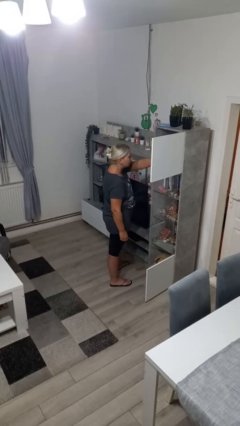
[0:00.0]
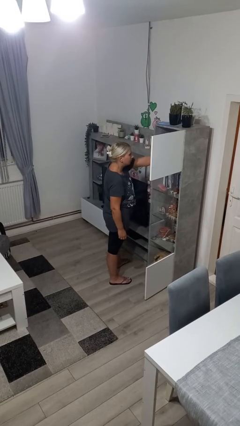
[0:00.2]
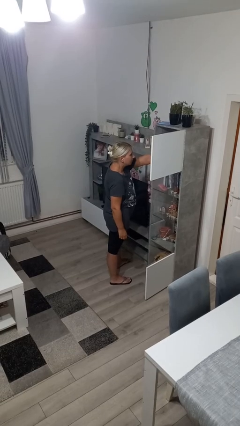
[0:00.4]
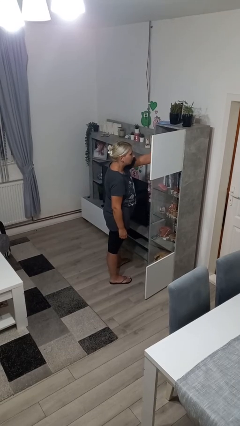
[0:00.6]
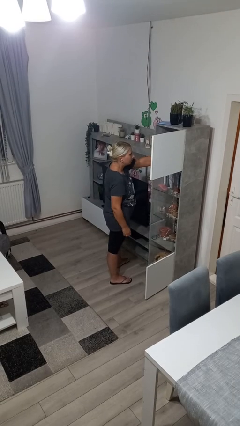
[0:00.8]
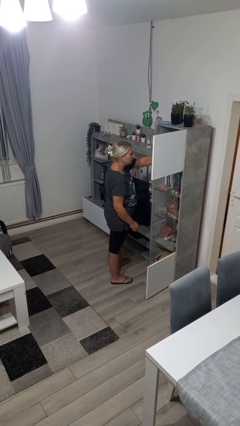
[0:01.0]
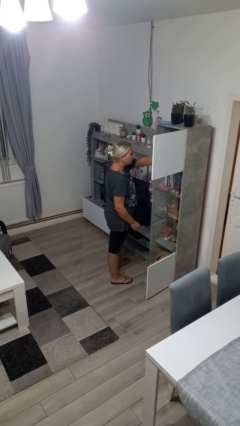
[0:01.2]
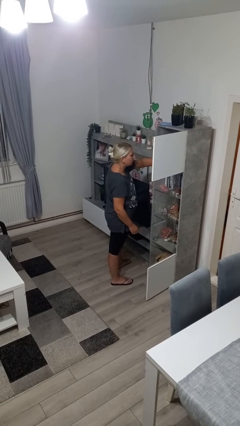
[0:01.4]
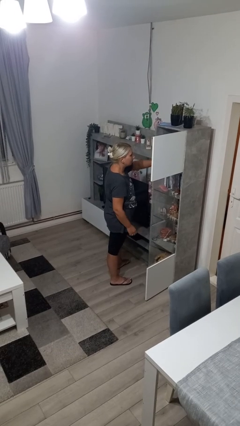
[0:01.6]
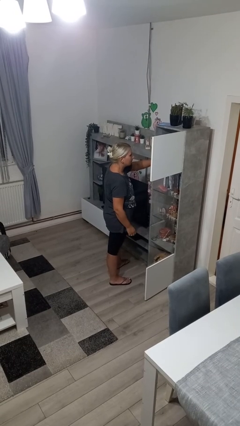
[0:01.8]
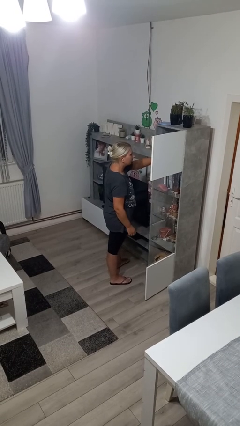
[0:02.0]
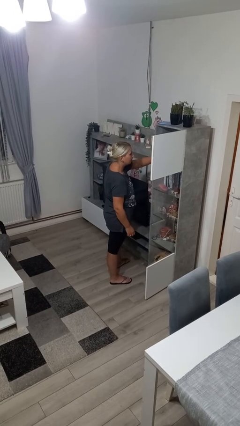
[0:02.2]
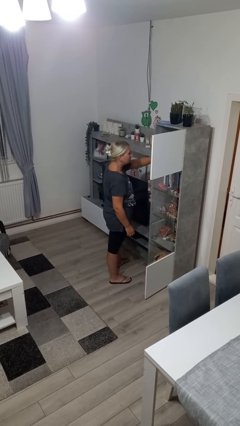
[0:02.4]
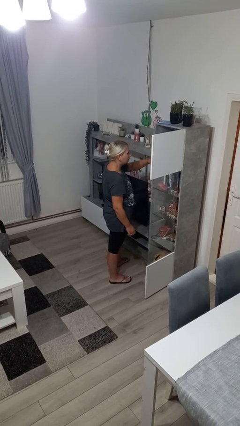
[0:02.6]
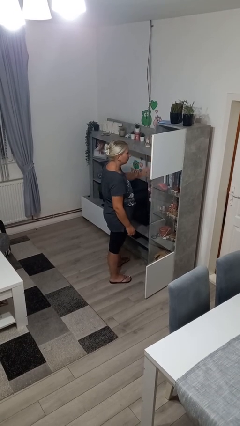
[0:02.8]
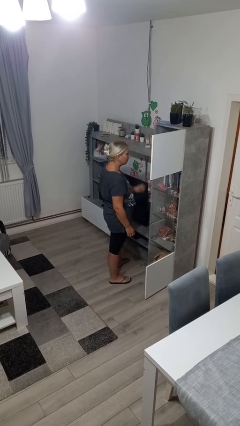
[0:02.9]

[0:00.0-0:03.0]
person searches in cabinet

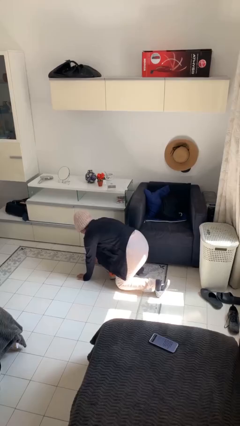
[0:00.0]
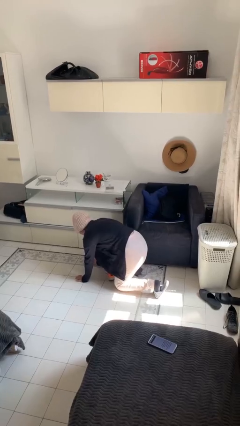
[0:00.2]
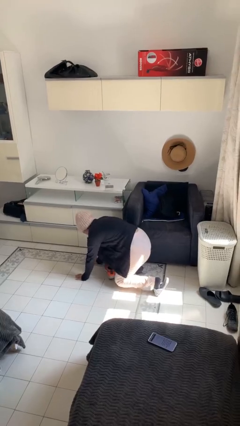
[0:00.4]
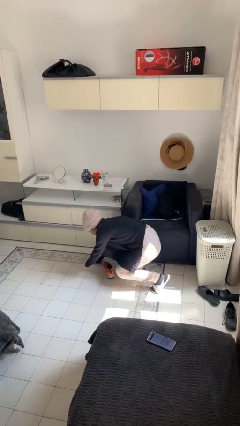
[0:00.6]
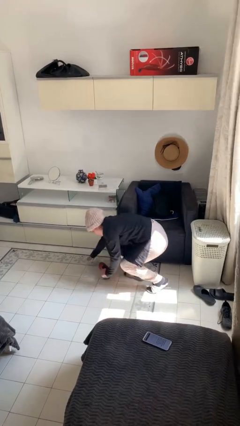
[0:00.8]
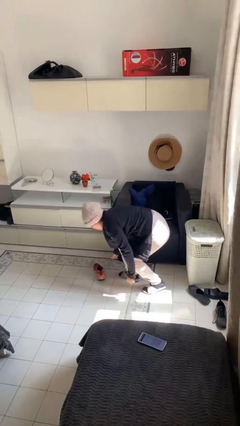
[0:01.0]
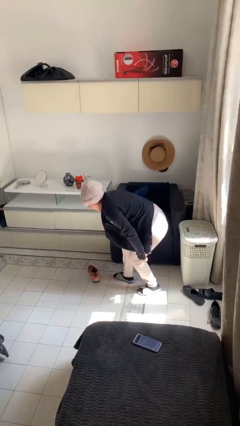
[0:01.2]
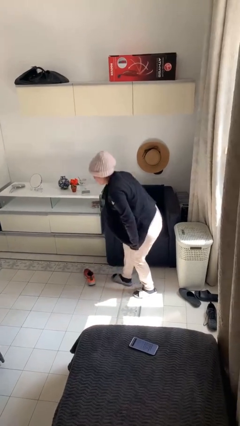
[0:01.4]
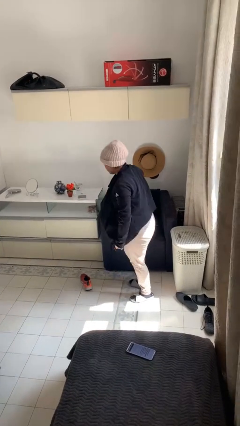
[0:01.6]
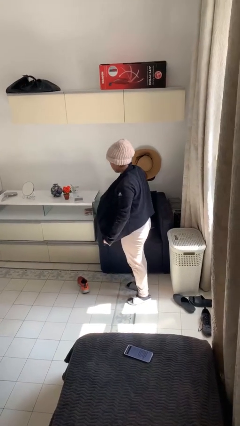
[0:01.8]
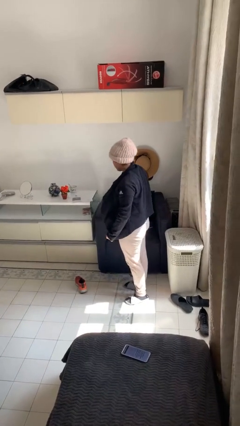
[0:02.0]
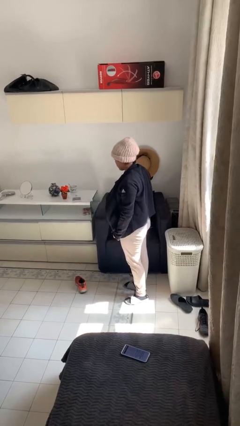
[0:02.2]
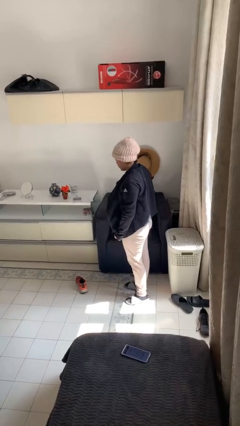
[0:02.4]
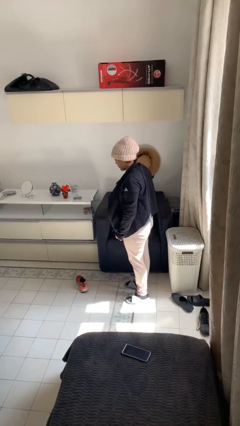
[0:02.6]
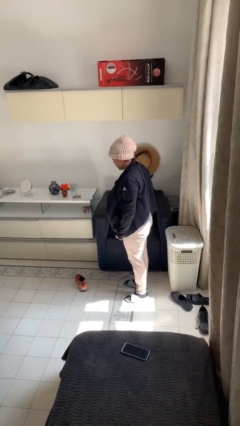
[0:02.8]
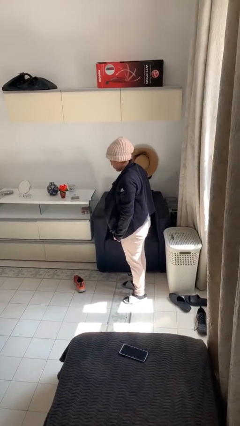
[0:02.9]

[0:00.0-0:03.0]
person stands up from floor

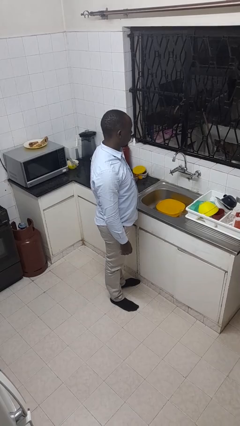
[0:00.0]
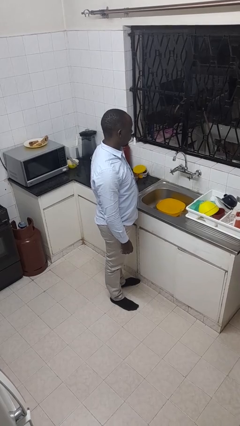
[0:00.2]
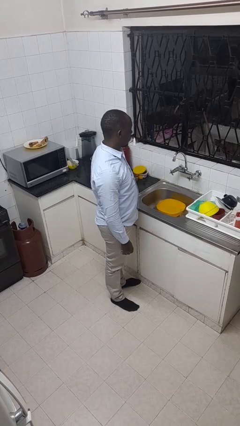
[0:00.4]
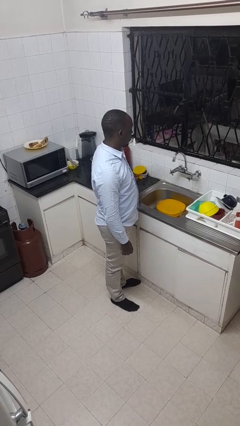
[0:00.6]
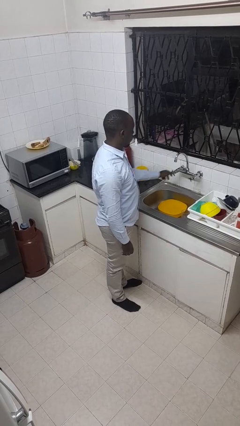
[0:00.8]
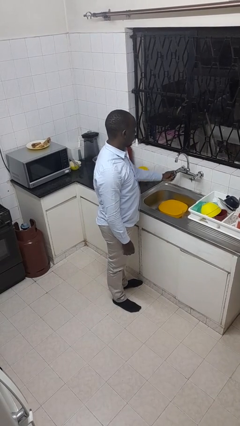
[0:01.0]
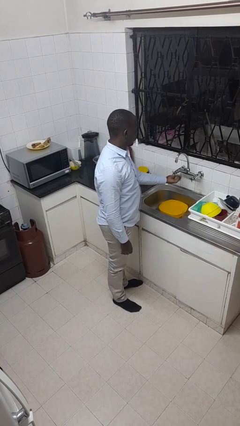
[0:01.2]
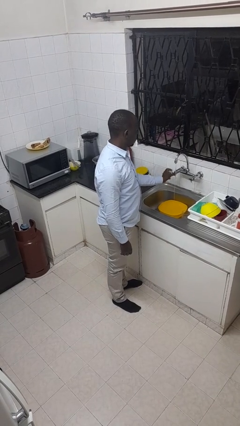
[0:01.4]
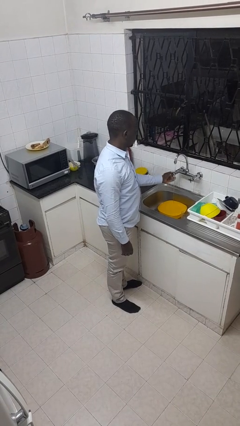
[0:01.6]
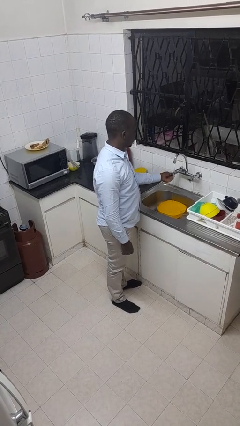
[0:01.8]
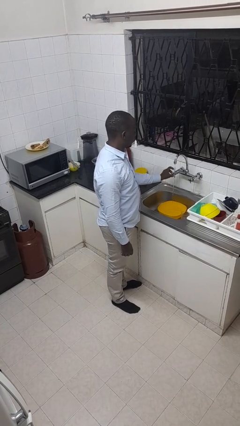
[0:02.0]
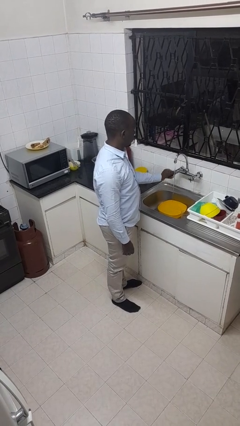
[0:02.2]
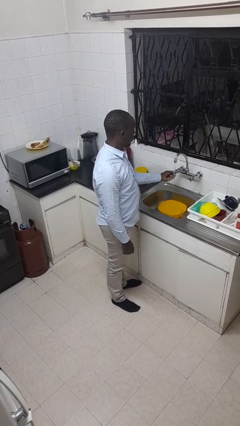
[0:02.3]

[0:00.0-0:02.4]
person turns on faucet

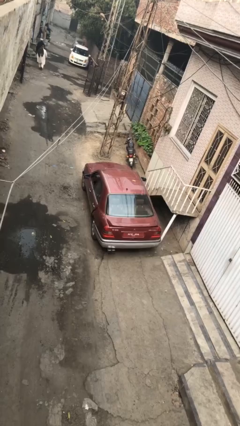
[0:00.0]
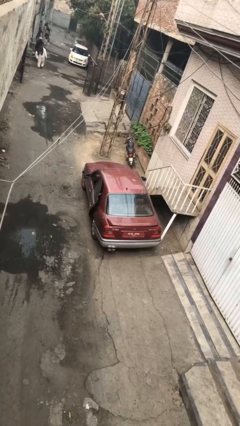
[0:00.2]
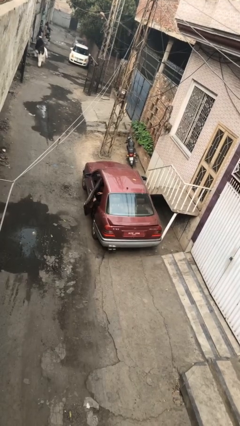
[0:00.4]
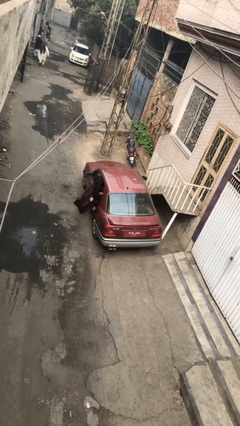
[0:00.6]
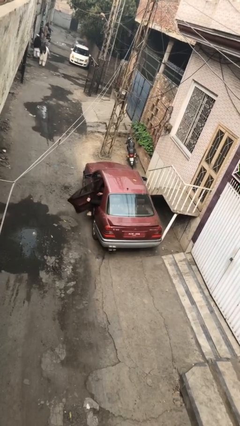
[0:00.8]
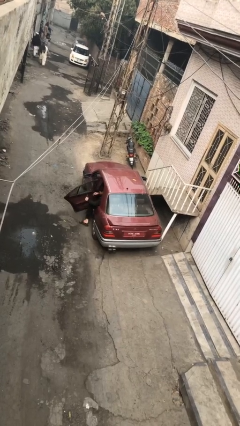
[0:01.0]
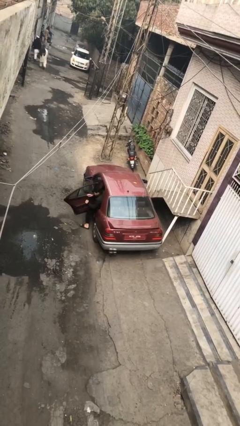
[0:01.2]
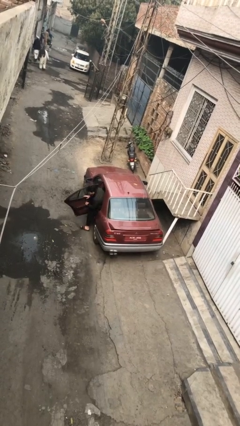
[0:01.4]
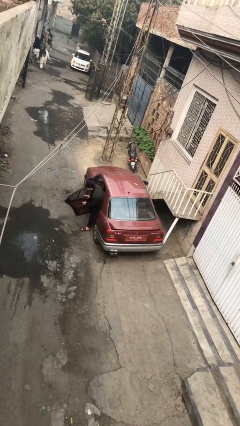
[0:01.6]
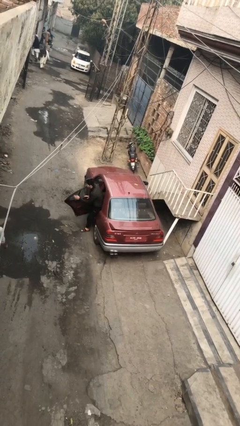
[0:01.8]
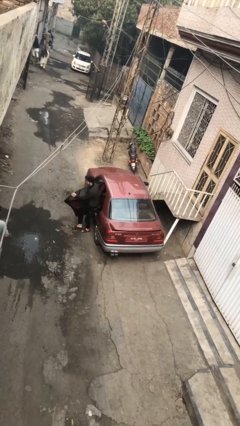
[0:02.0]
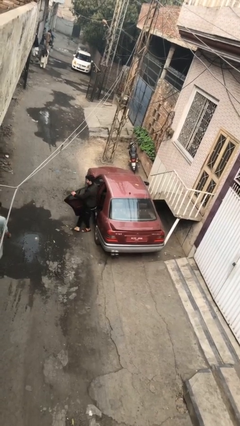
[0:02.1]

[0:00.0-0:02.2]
car drops off person

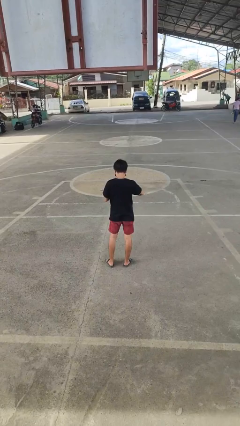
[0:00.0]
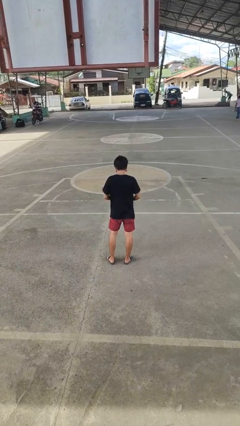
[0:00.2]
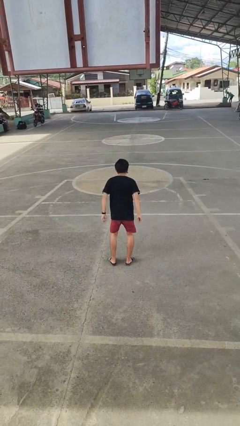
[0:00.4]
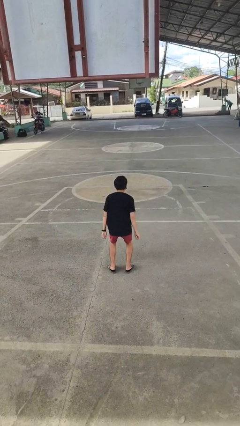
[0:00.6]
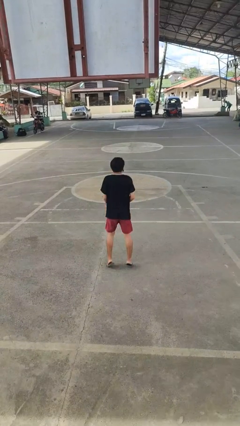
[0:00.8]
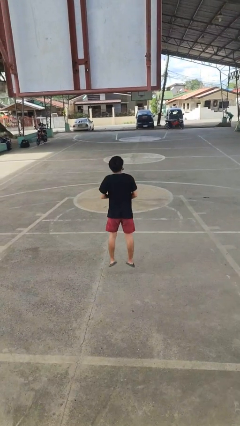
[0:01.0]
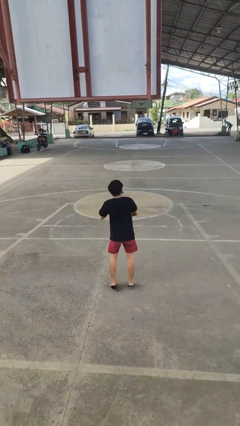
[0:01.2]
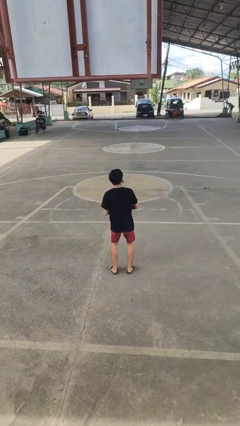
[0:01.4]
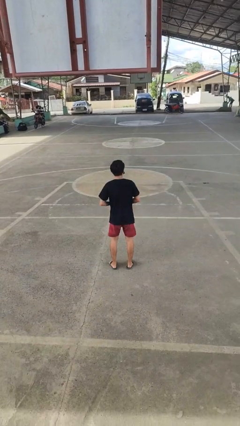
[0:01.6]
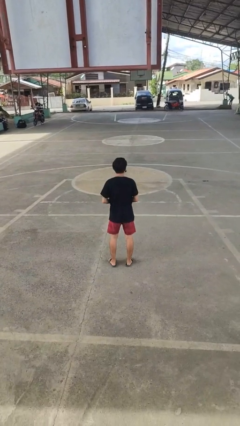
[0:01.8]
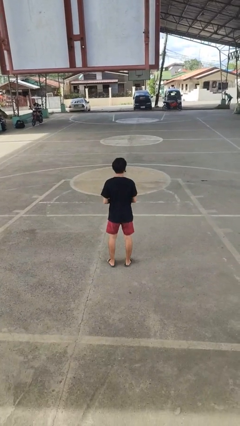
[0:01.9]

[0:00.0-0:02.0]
person jumps

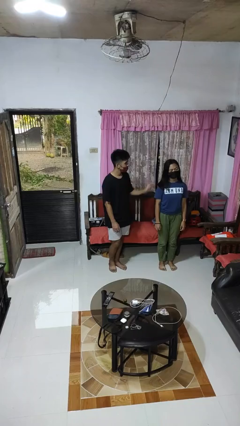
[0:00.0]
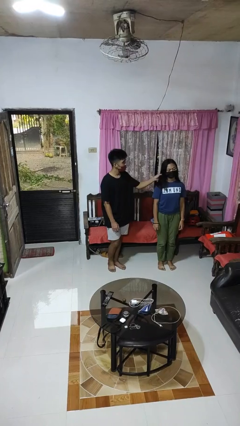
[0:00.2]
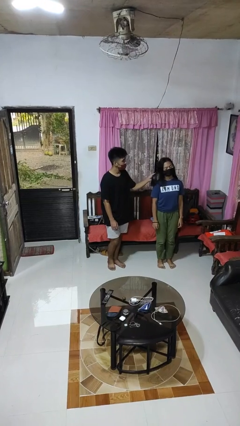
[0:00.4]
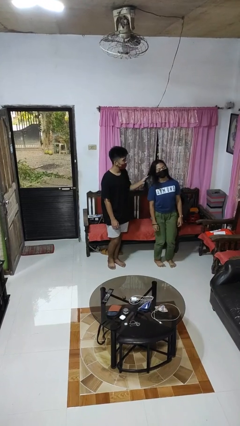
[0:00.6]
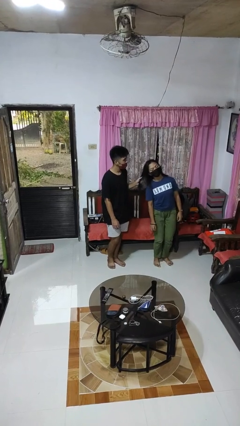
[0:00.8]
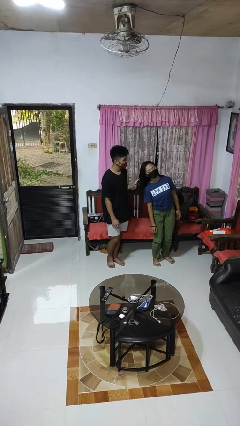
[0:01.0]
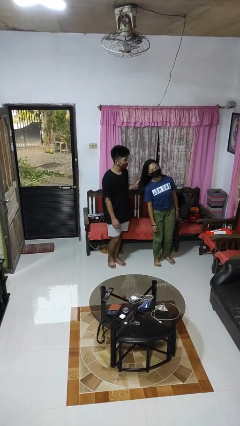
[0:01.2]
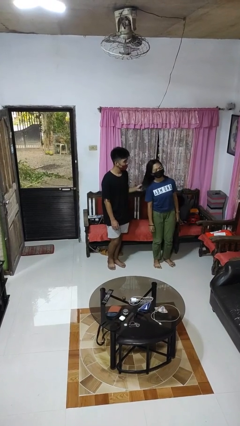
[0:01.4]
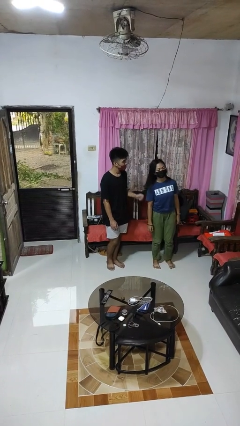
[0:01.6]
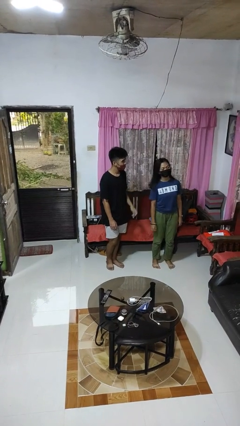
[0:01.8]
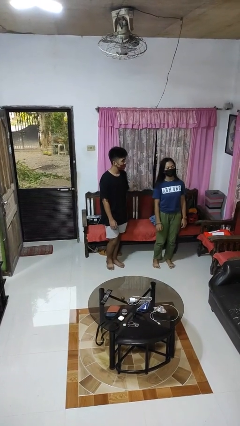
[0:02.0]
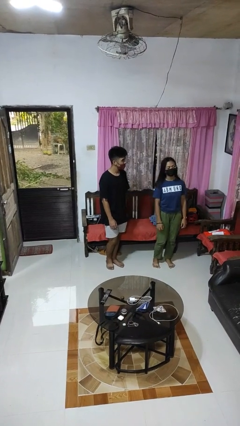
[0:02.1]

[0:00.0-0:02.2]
person grabs person by hair

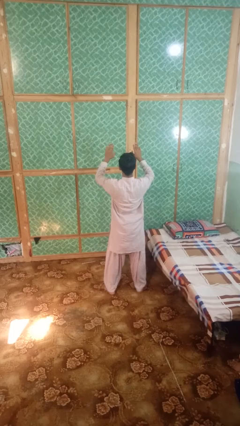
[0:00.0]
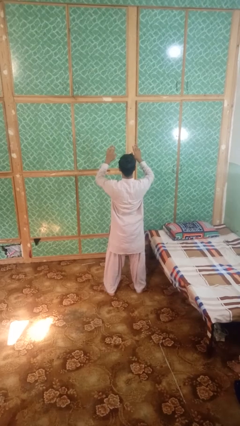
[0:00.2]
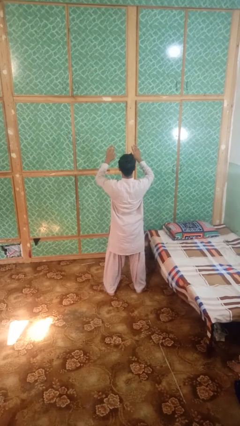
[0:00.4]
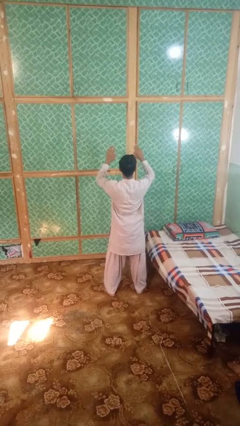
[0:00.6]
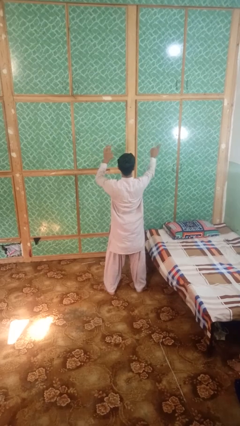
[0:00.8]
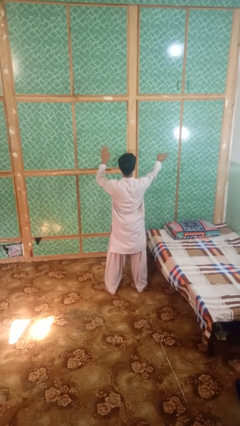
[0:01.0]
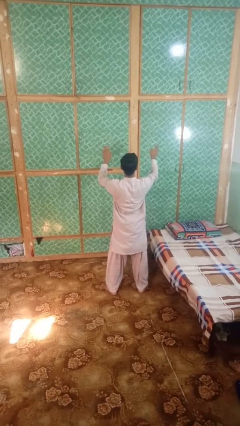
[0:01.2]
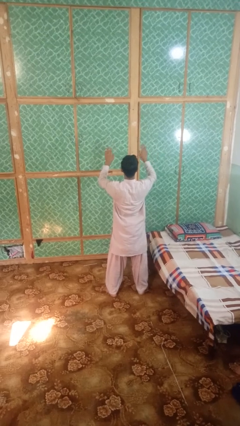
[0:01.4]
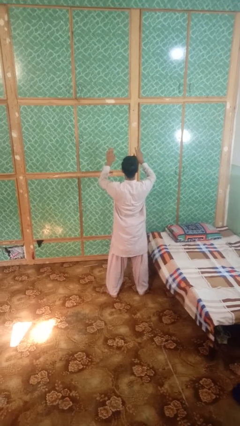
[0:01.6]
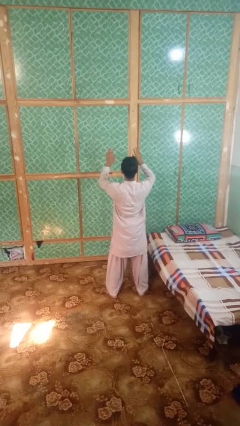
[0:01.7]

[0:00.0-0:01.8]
person gestures swipe right

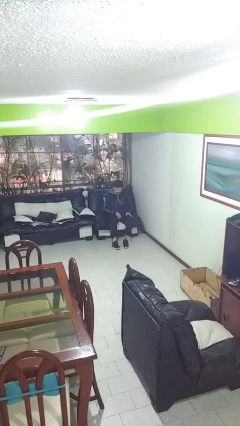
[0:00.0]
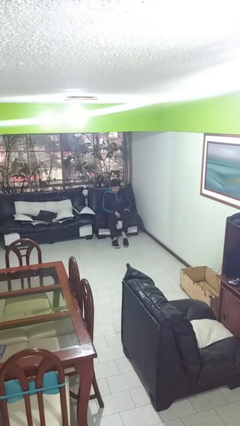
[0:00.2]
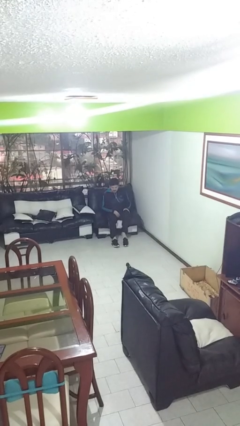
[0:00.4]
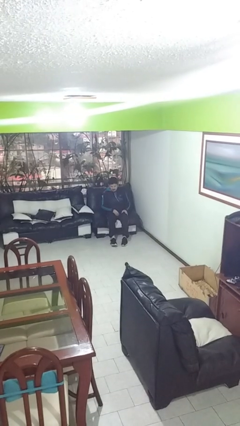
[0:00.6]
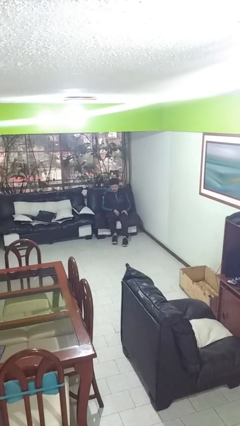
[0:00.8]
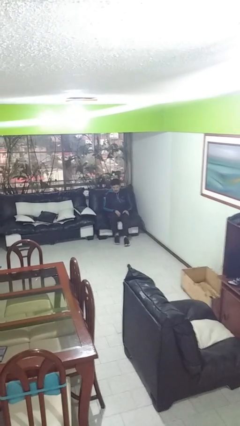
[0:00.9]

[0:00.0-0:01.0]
person puts on shoes
